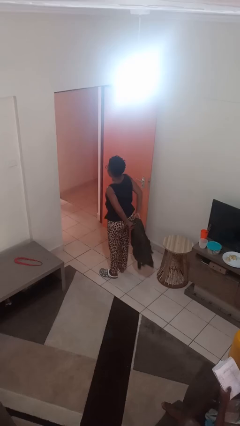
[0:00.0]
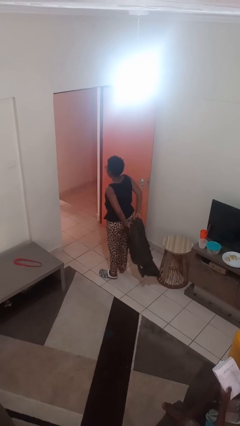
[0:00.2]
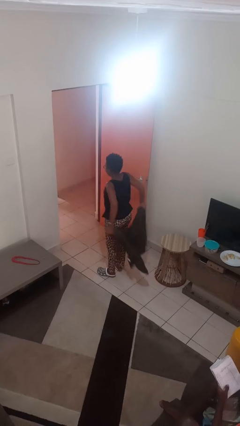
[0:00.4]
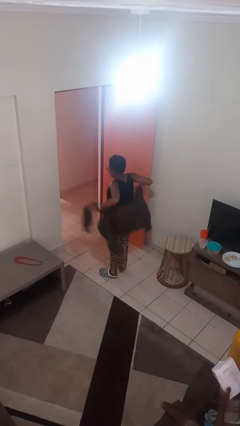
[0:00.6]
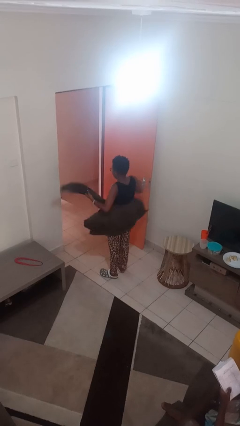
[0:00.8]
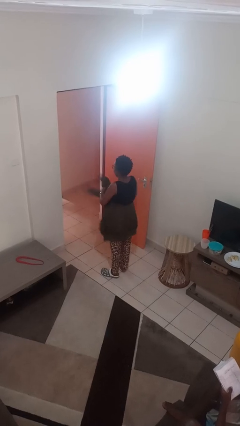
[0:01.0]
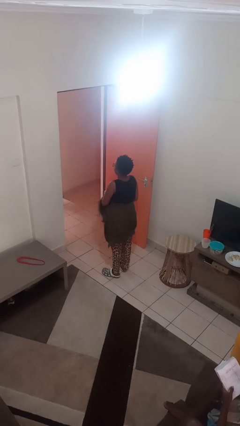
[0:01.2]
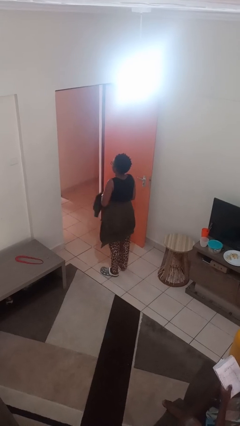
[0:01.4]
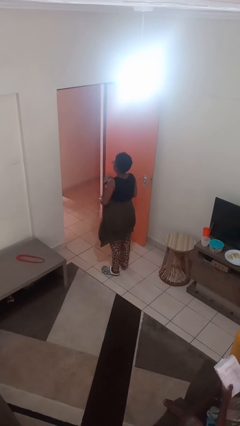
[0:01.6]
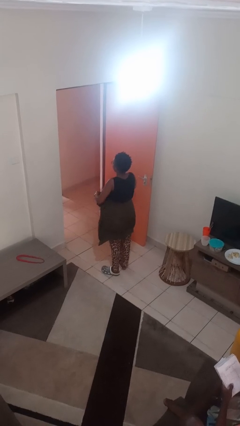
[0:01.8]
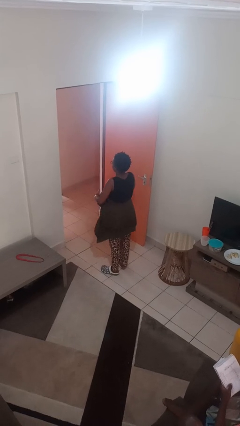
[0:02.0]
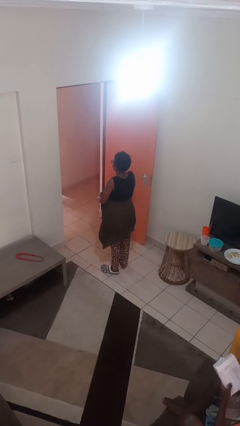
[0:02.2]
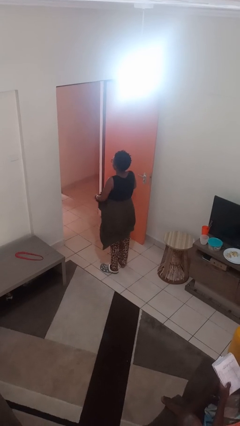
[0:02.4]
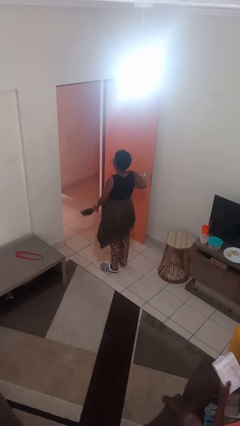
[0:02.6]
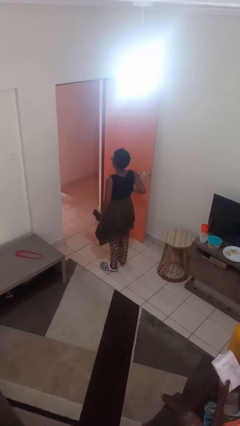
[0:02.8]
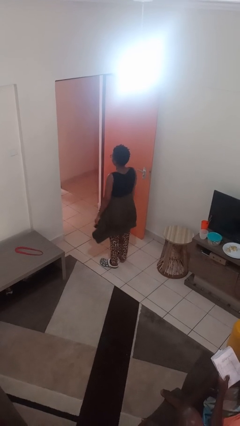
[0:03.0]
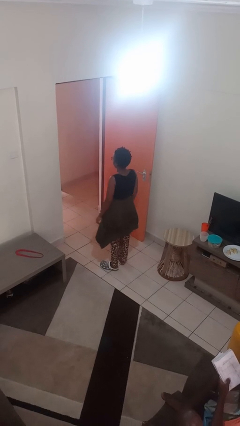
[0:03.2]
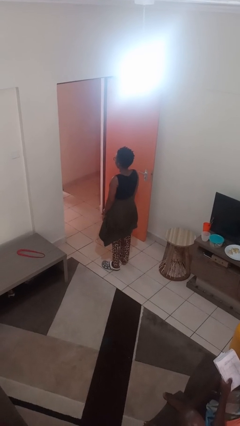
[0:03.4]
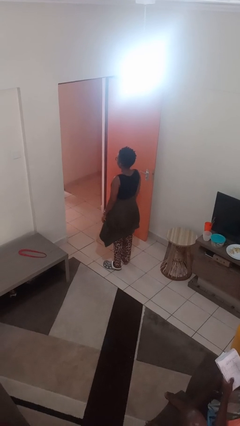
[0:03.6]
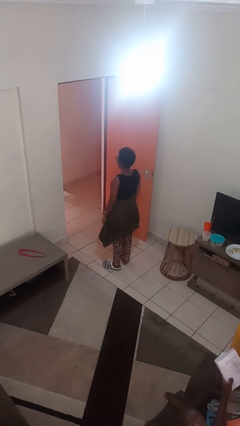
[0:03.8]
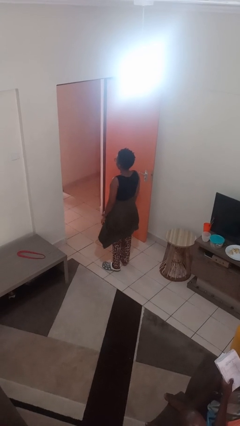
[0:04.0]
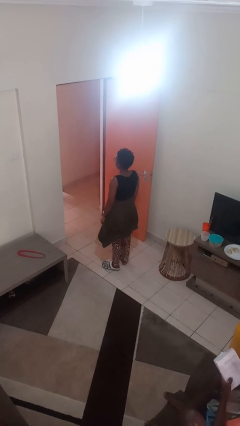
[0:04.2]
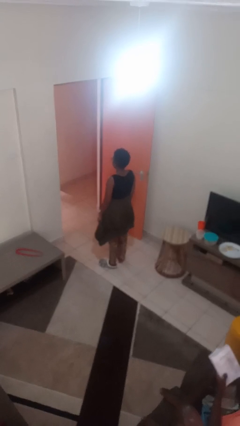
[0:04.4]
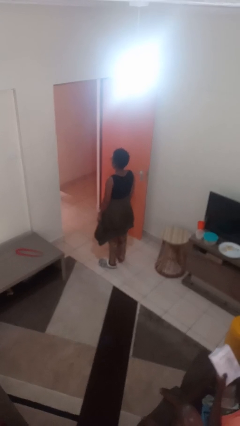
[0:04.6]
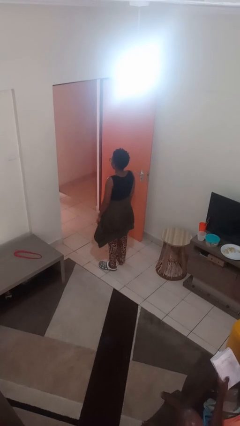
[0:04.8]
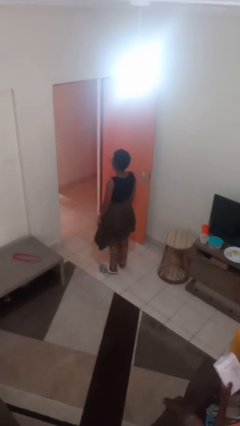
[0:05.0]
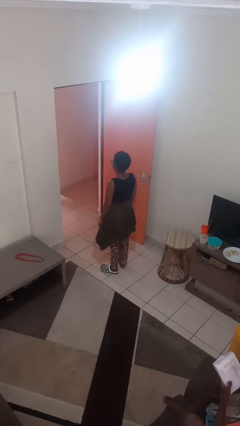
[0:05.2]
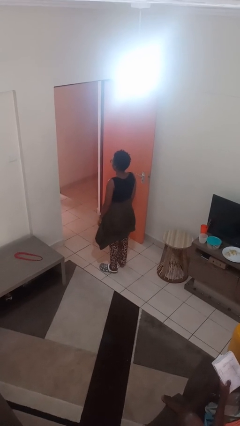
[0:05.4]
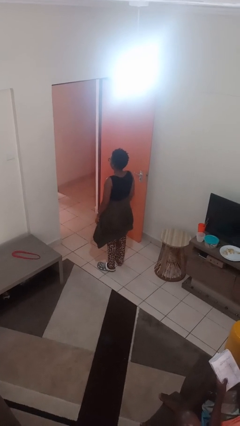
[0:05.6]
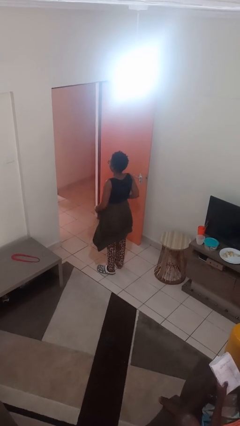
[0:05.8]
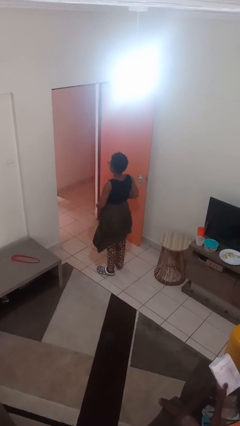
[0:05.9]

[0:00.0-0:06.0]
person ties jacket around waist

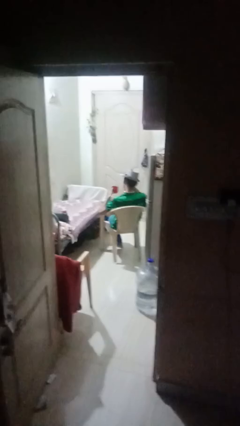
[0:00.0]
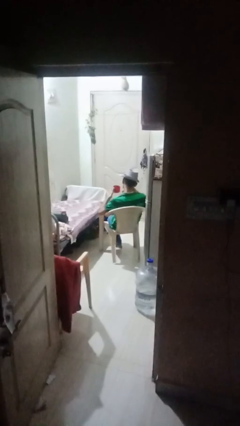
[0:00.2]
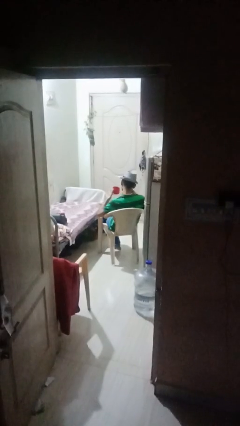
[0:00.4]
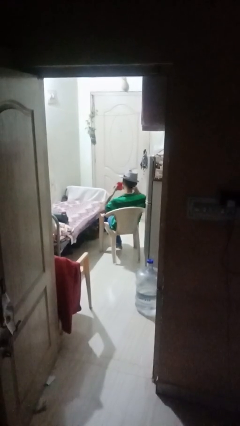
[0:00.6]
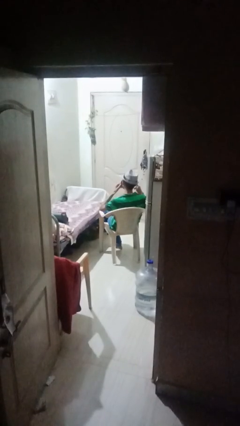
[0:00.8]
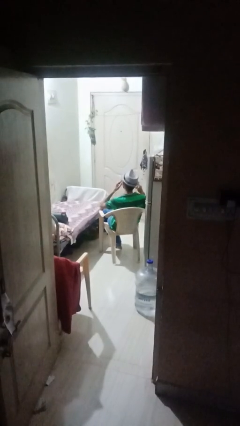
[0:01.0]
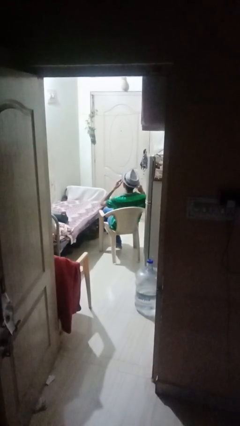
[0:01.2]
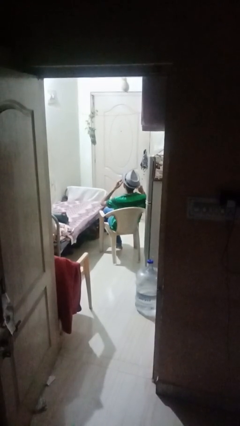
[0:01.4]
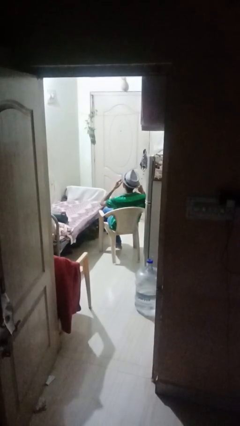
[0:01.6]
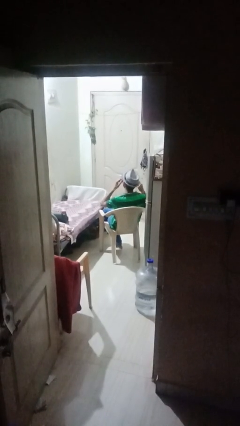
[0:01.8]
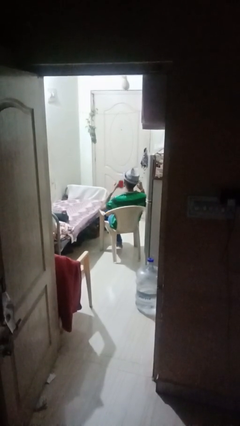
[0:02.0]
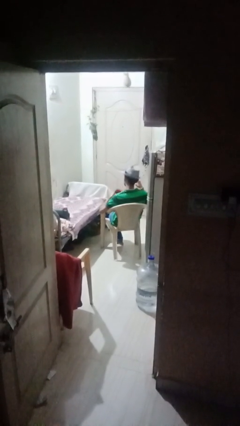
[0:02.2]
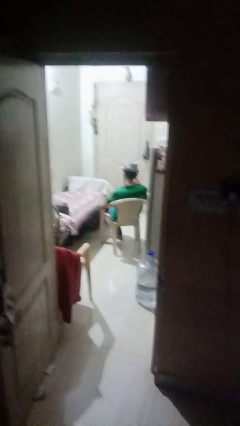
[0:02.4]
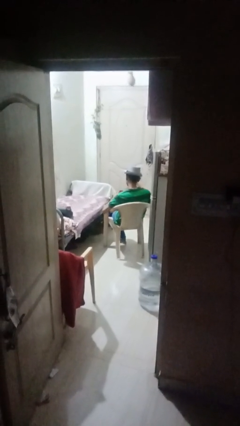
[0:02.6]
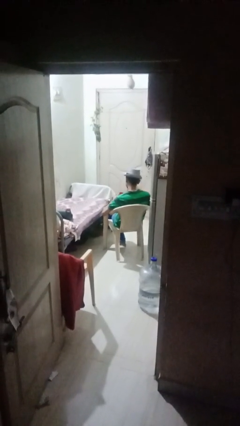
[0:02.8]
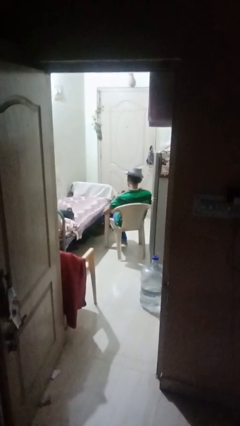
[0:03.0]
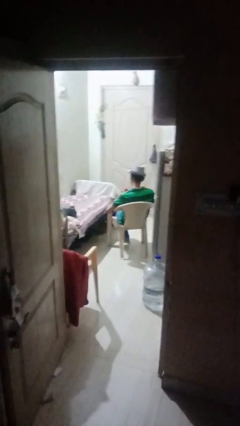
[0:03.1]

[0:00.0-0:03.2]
person drinks from mug

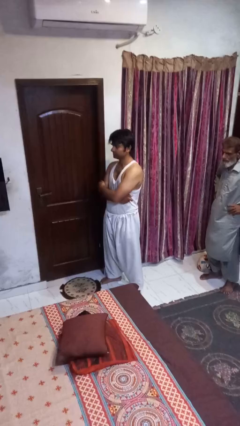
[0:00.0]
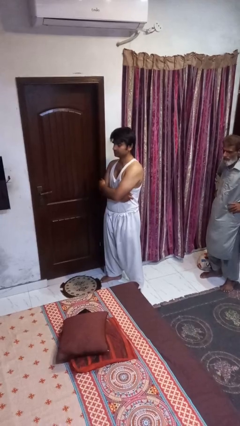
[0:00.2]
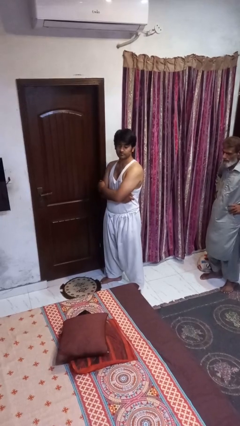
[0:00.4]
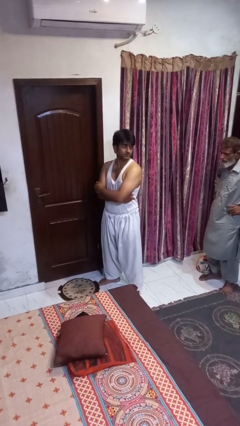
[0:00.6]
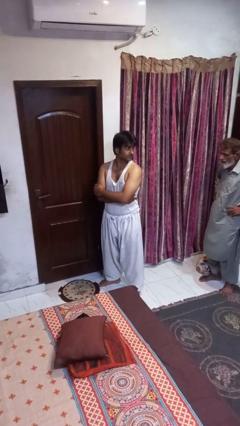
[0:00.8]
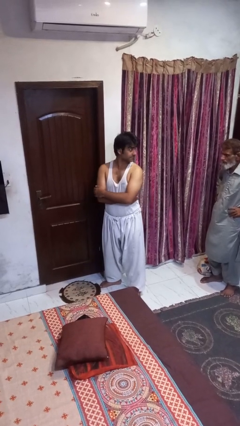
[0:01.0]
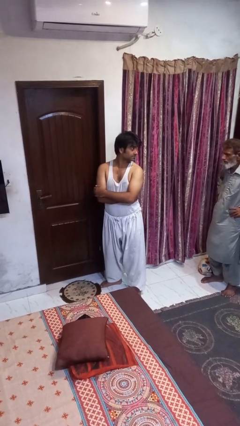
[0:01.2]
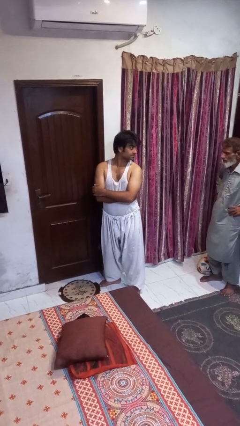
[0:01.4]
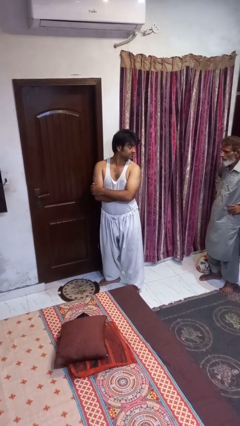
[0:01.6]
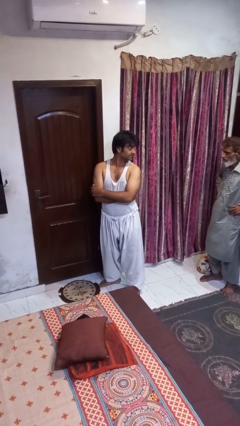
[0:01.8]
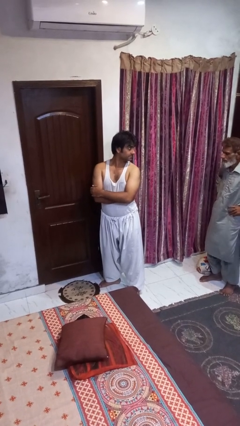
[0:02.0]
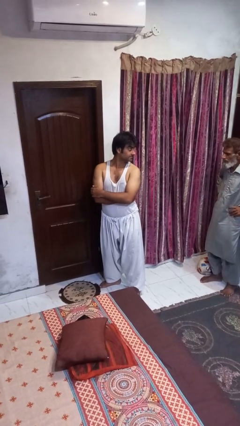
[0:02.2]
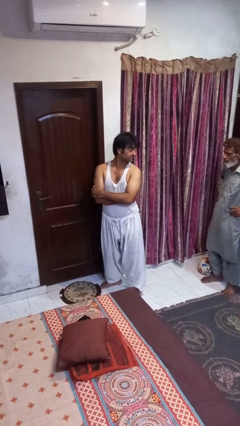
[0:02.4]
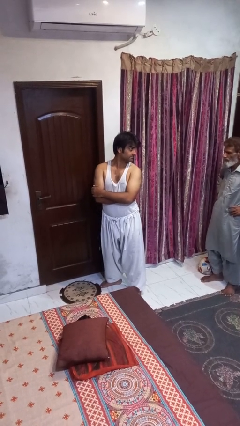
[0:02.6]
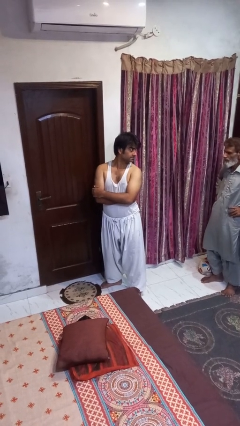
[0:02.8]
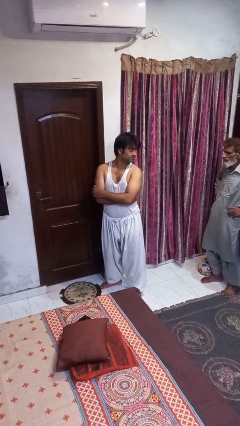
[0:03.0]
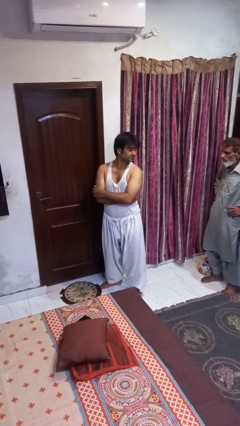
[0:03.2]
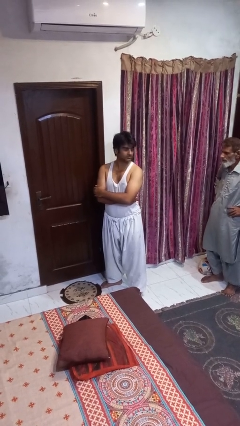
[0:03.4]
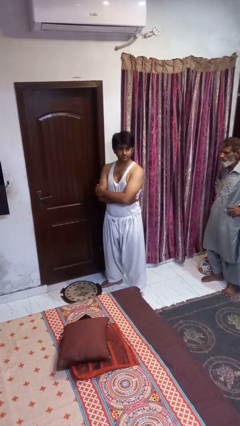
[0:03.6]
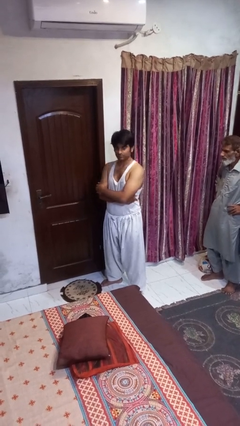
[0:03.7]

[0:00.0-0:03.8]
person looks over shoulder

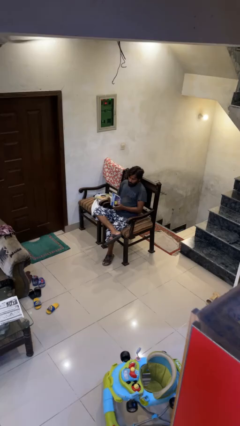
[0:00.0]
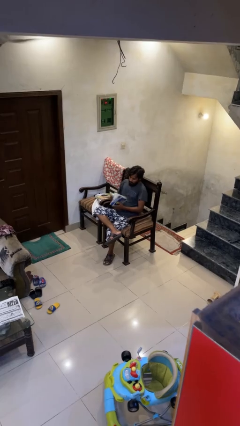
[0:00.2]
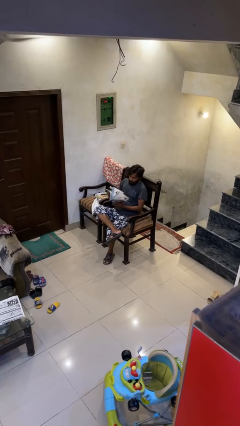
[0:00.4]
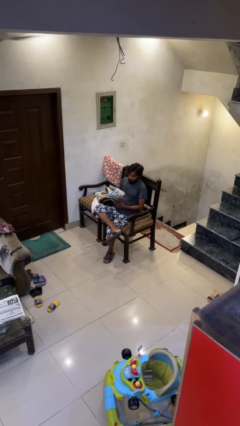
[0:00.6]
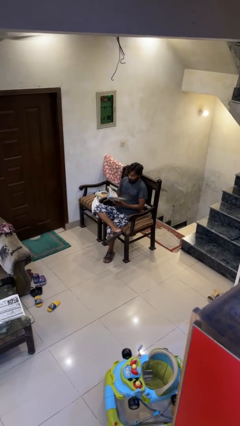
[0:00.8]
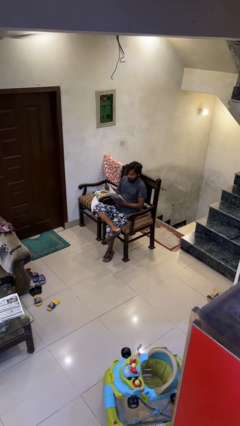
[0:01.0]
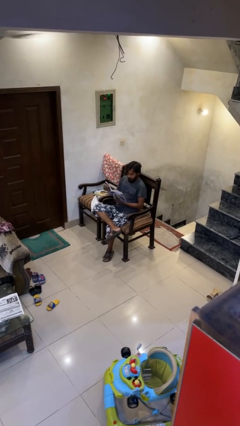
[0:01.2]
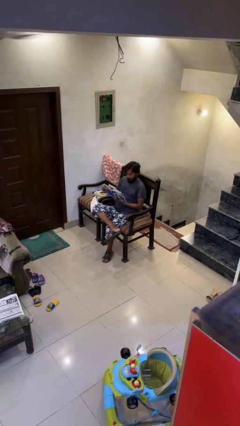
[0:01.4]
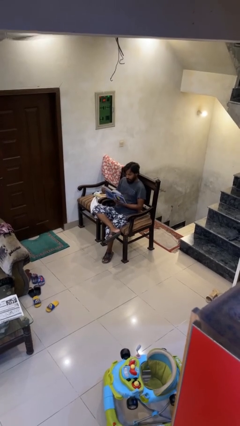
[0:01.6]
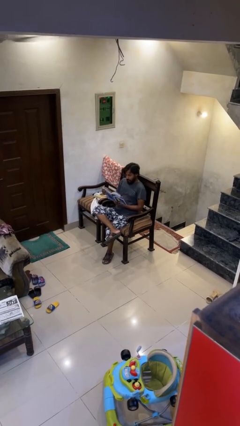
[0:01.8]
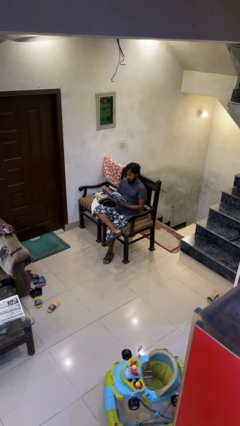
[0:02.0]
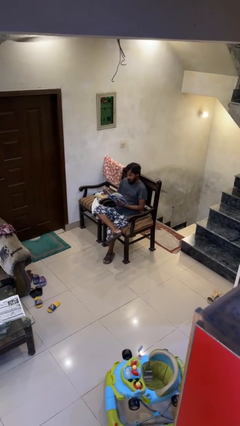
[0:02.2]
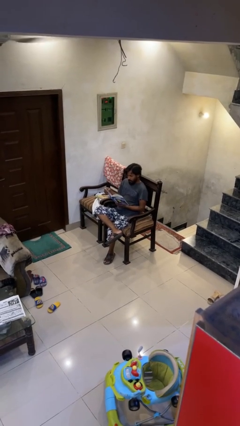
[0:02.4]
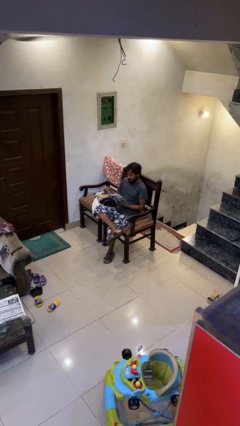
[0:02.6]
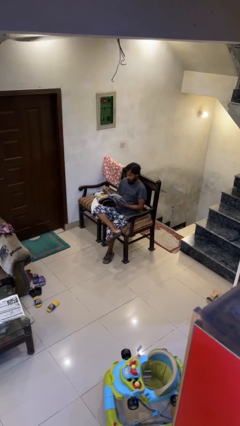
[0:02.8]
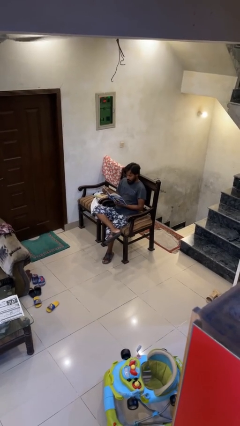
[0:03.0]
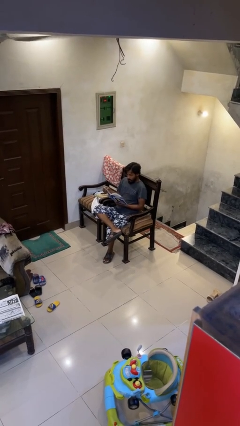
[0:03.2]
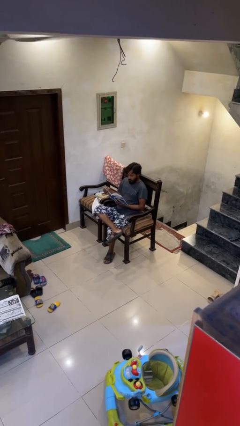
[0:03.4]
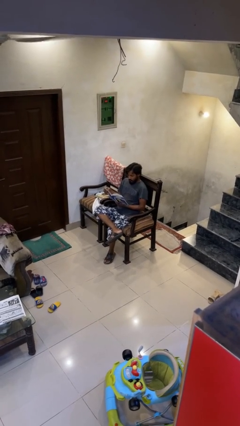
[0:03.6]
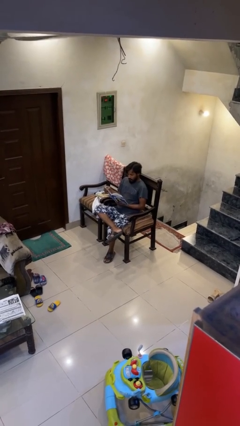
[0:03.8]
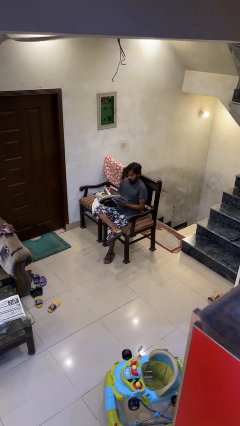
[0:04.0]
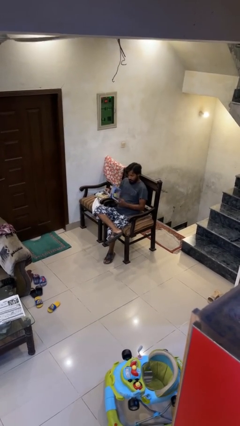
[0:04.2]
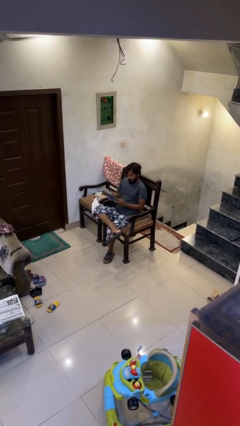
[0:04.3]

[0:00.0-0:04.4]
person reads book

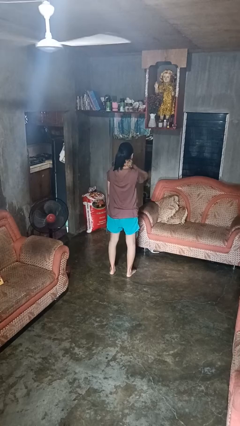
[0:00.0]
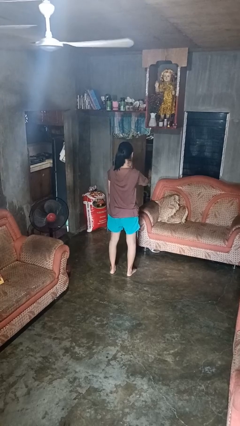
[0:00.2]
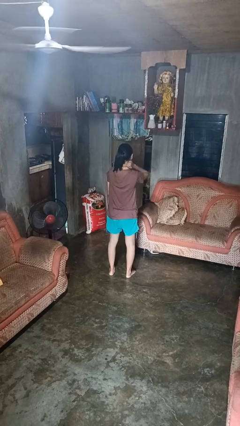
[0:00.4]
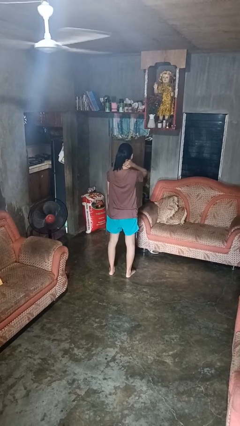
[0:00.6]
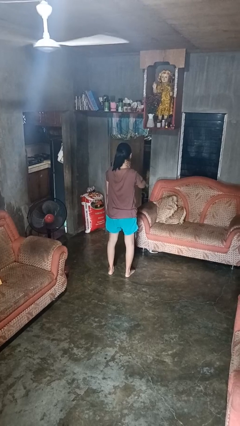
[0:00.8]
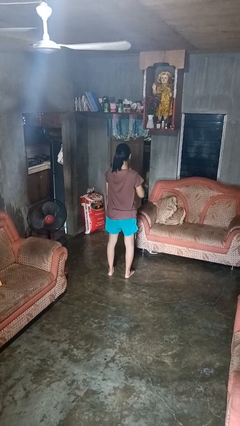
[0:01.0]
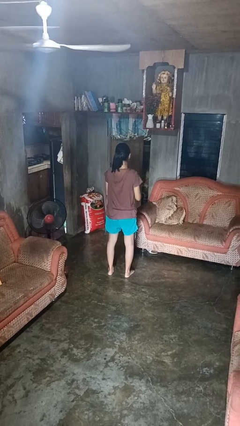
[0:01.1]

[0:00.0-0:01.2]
person rubs neck
